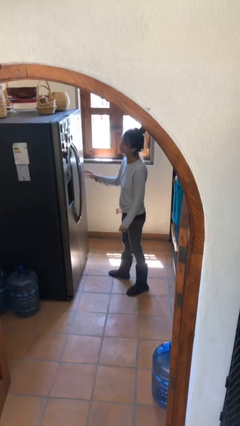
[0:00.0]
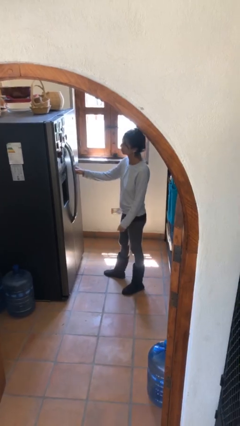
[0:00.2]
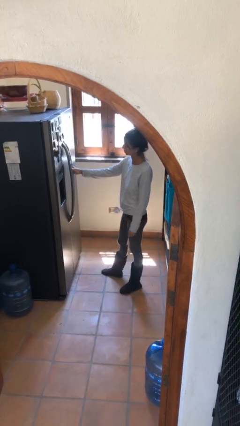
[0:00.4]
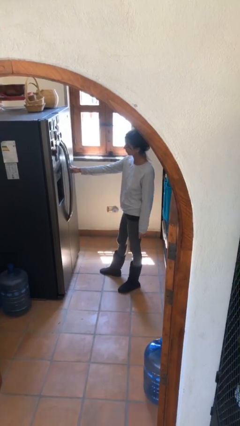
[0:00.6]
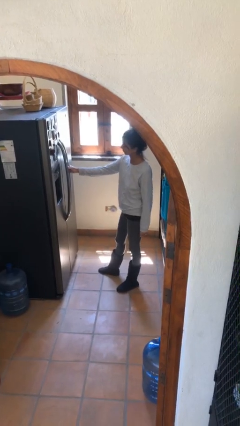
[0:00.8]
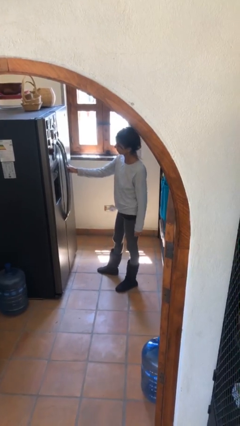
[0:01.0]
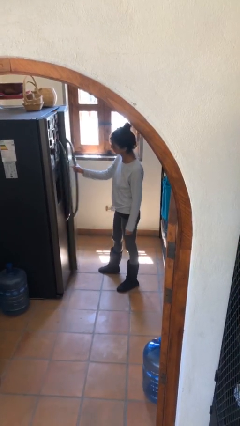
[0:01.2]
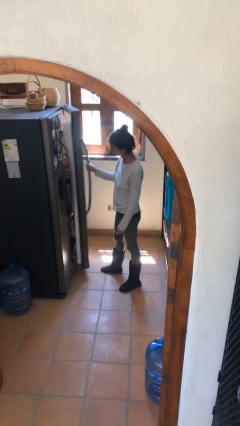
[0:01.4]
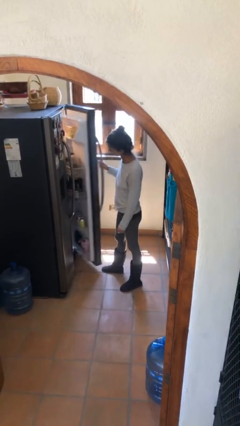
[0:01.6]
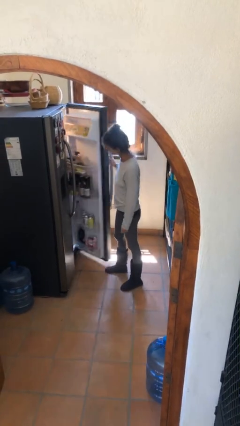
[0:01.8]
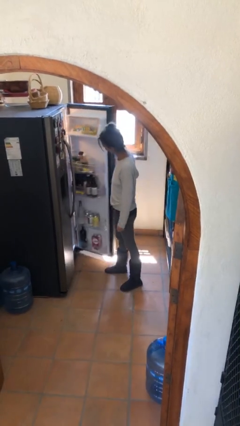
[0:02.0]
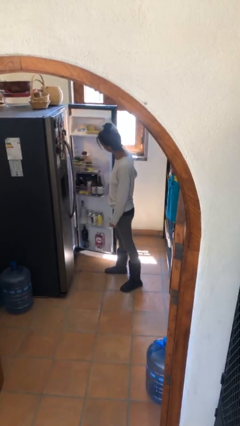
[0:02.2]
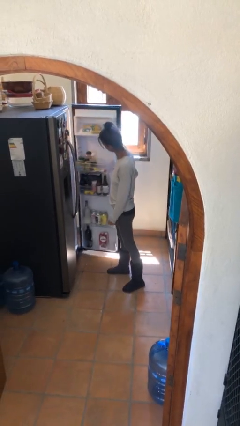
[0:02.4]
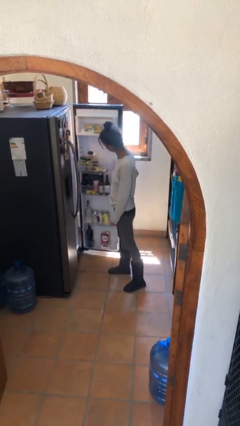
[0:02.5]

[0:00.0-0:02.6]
person opens refrigerator

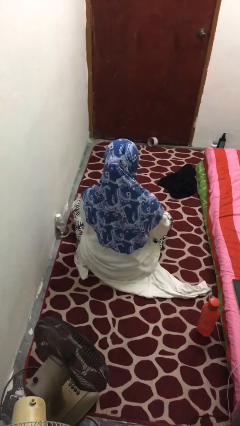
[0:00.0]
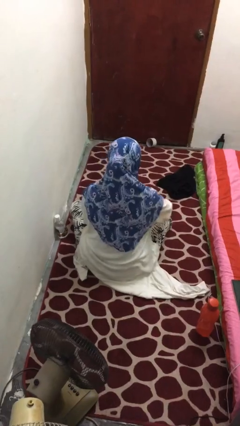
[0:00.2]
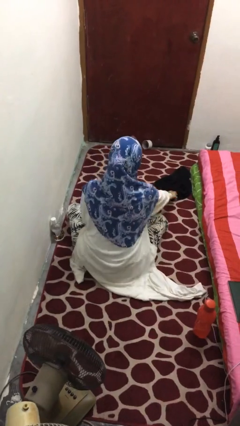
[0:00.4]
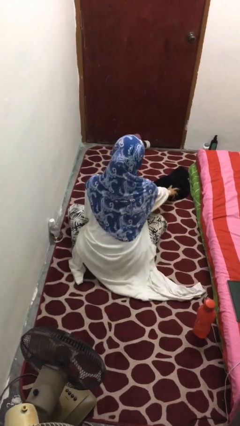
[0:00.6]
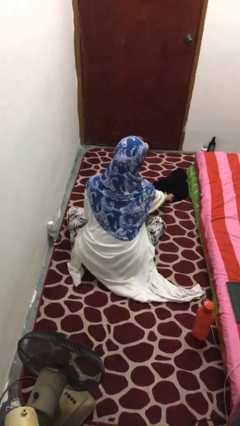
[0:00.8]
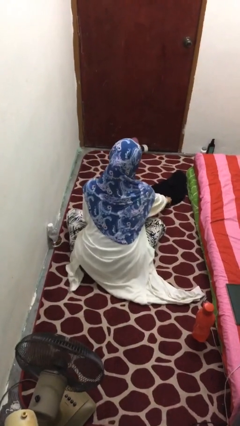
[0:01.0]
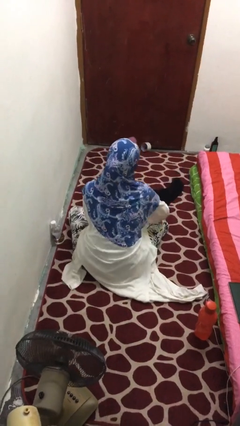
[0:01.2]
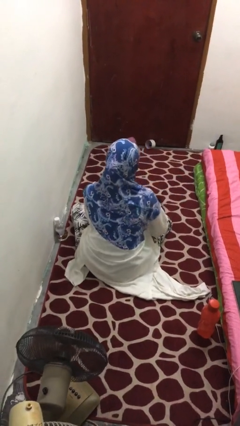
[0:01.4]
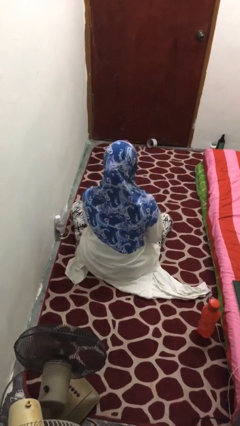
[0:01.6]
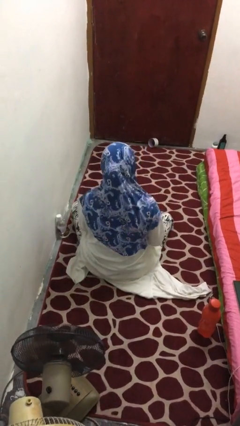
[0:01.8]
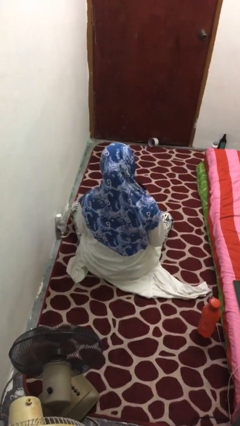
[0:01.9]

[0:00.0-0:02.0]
person picks up object from floor

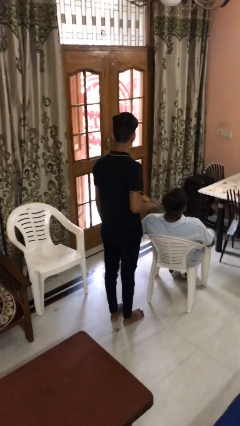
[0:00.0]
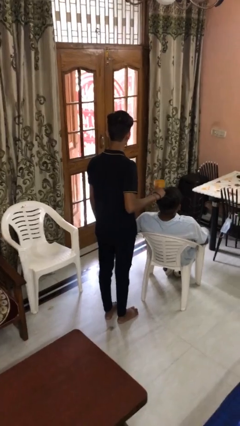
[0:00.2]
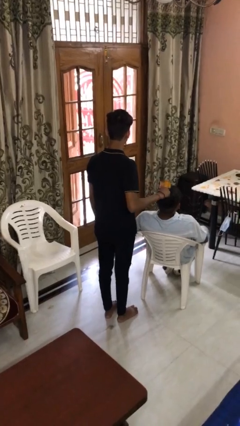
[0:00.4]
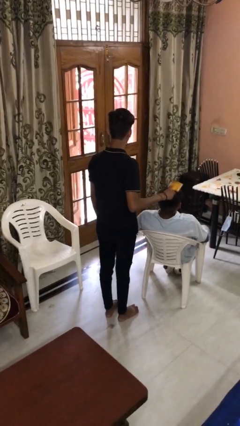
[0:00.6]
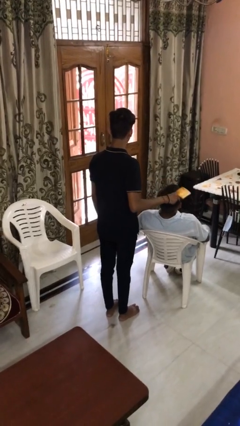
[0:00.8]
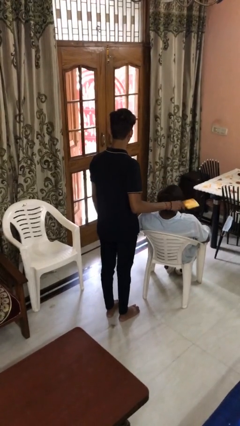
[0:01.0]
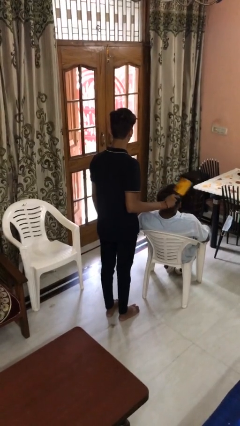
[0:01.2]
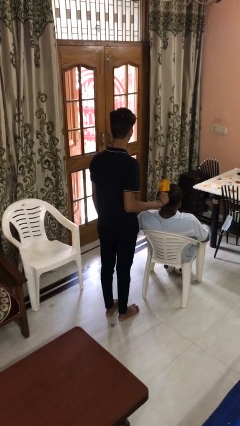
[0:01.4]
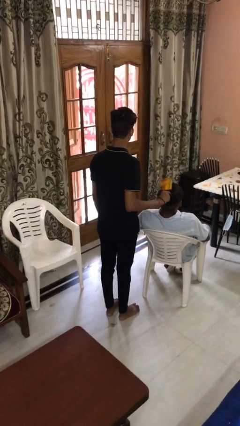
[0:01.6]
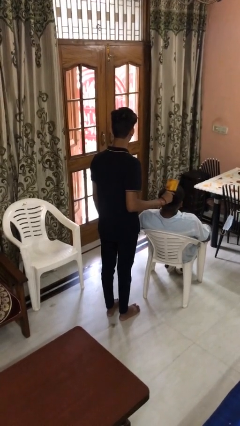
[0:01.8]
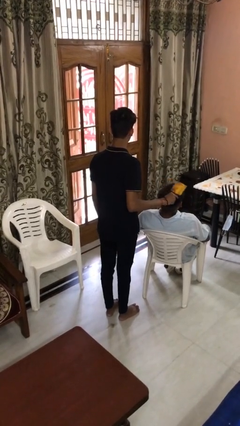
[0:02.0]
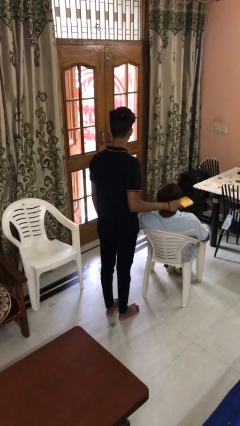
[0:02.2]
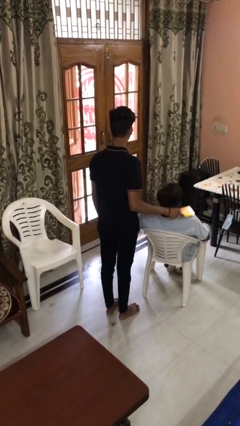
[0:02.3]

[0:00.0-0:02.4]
person brushes hair of person

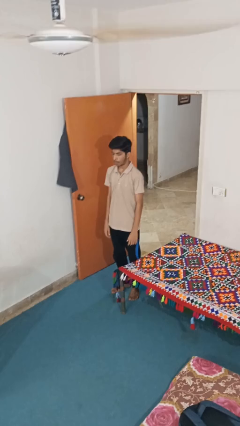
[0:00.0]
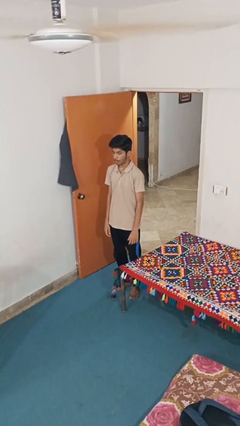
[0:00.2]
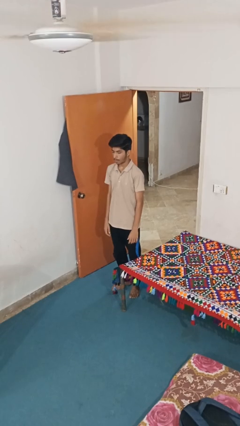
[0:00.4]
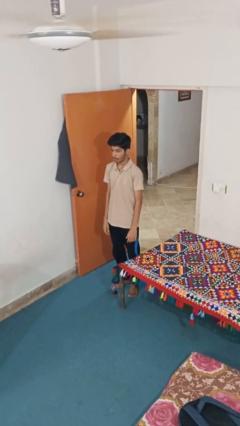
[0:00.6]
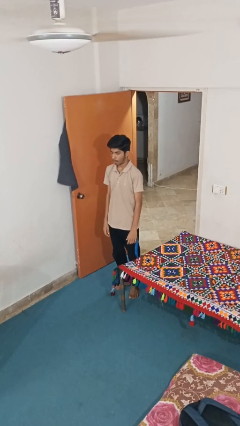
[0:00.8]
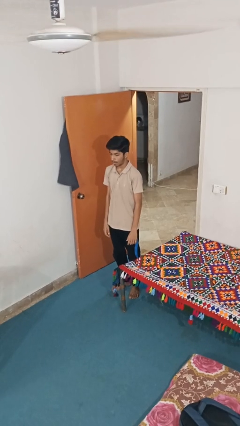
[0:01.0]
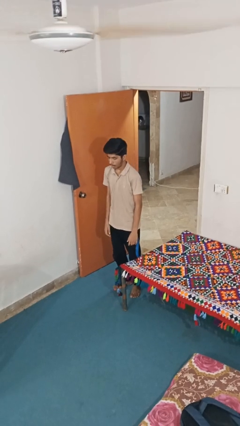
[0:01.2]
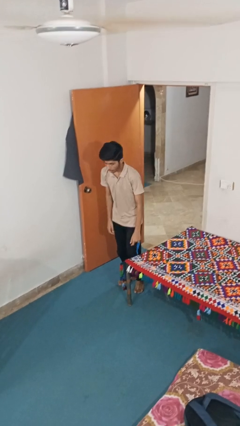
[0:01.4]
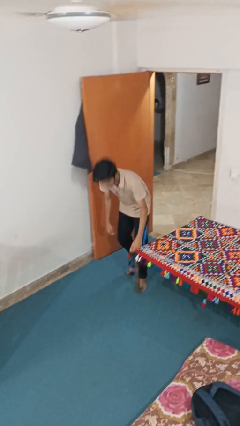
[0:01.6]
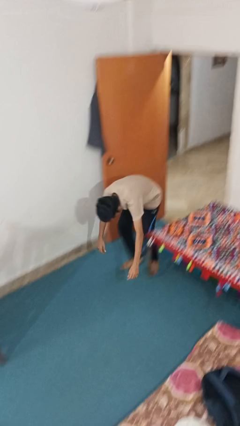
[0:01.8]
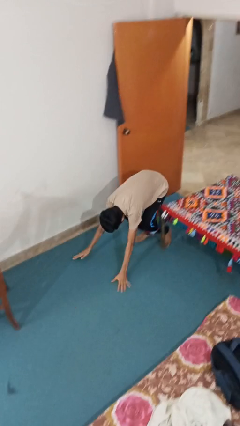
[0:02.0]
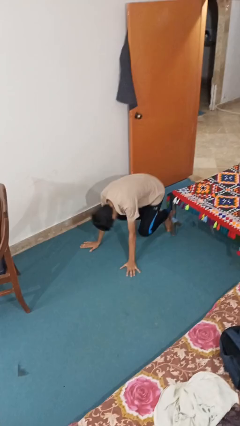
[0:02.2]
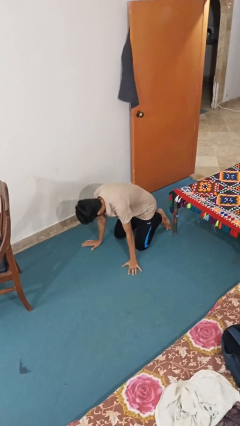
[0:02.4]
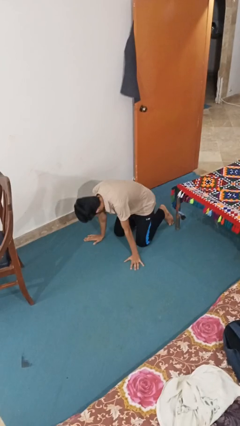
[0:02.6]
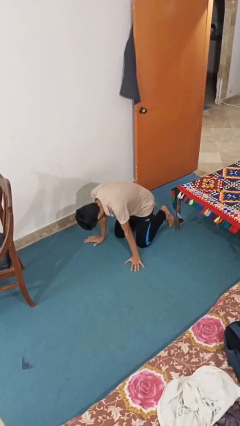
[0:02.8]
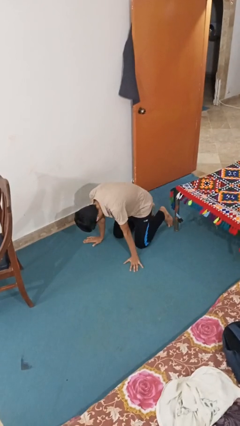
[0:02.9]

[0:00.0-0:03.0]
person trips on object on floor

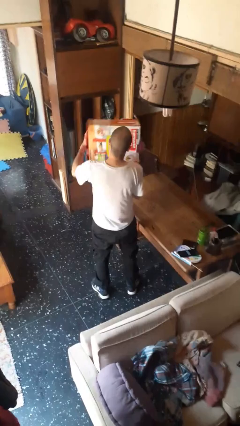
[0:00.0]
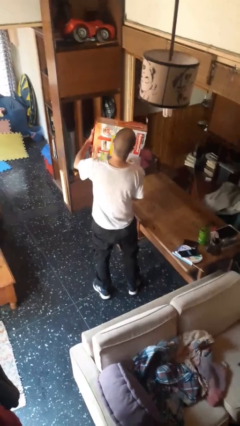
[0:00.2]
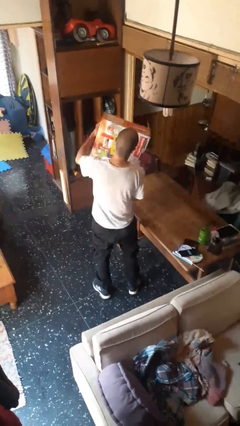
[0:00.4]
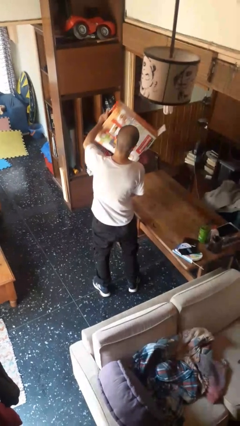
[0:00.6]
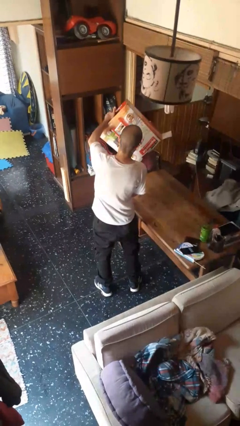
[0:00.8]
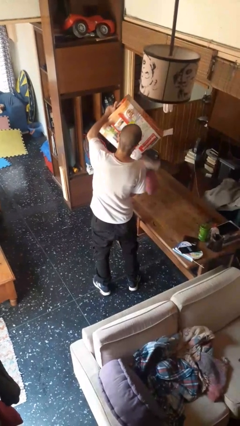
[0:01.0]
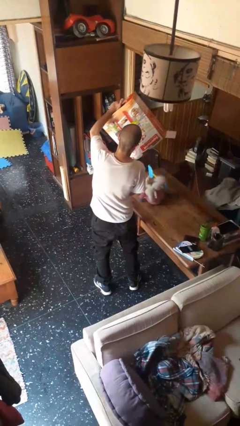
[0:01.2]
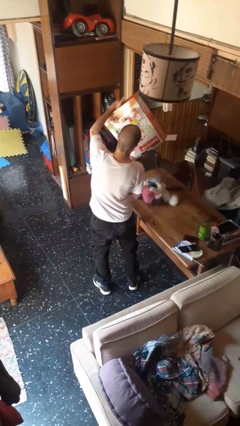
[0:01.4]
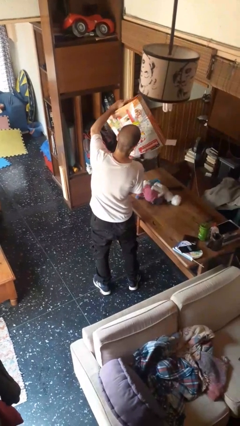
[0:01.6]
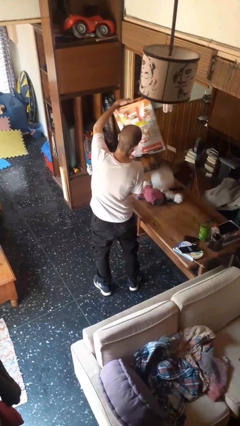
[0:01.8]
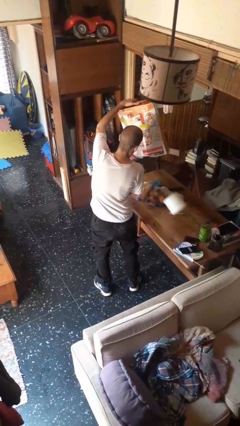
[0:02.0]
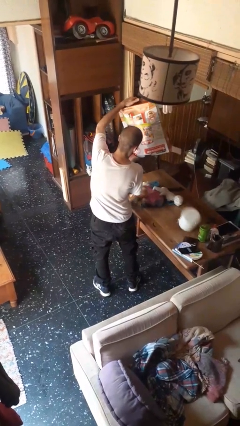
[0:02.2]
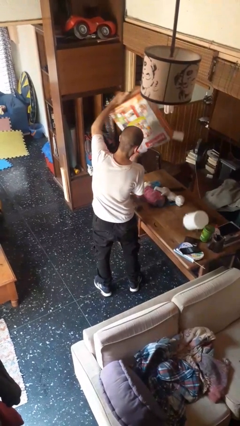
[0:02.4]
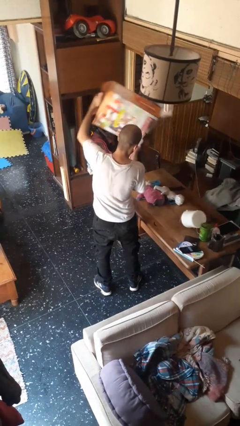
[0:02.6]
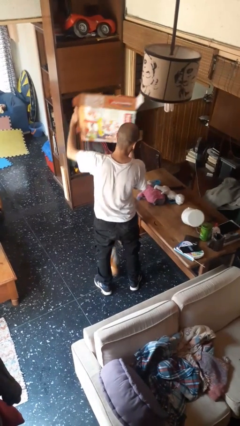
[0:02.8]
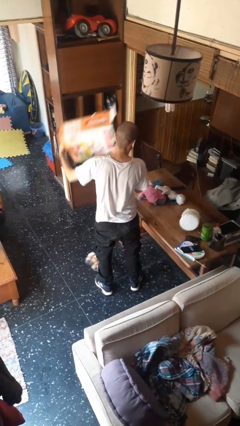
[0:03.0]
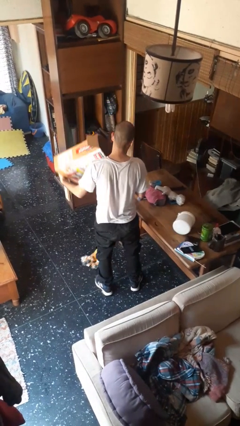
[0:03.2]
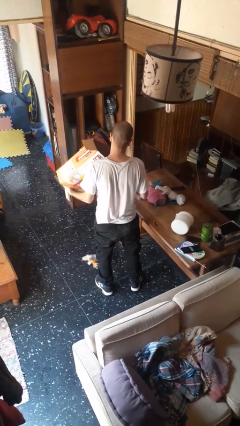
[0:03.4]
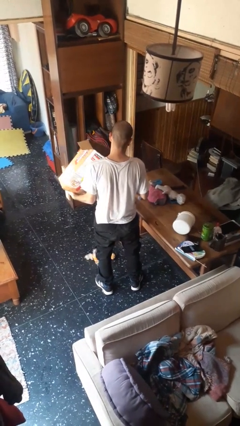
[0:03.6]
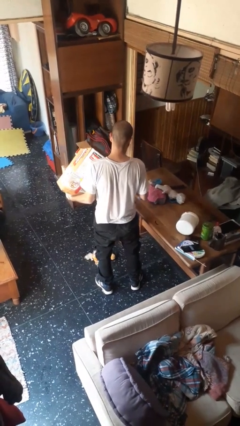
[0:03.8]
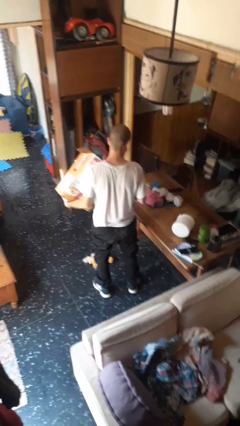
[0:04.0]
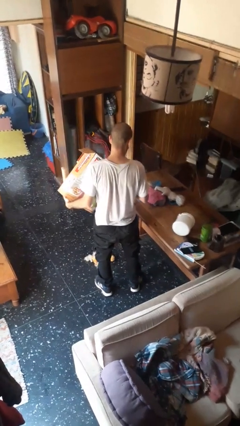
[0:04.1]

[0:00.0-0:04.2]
person unloads box onto table

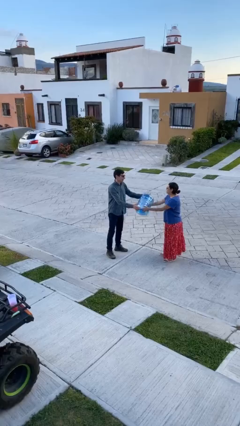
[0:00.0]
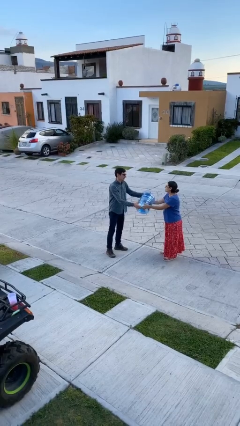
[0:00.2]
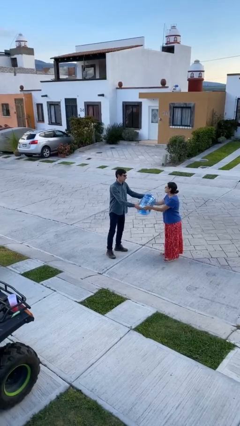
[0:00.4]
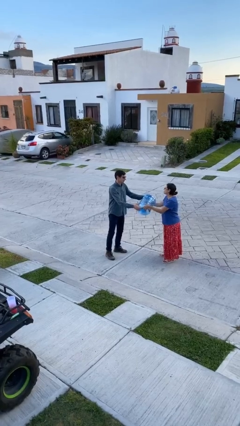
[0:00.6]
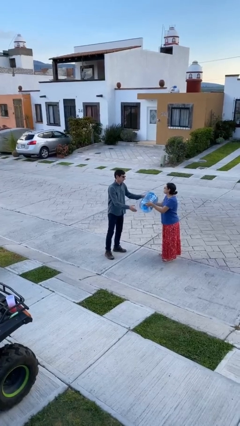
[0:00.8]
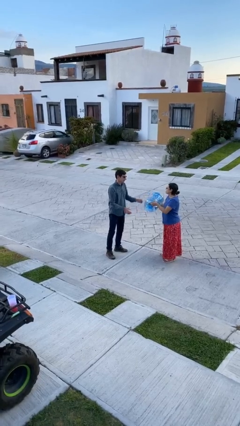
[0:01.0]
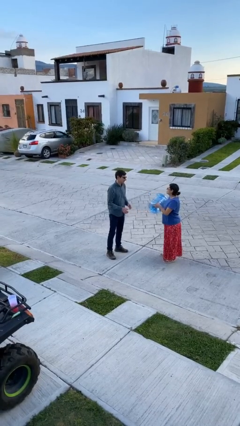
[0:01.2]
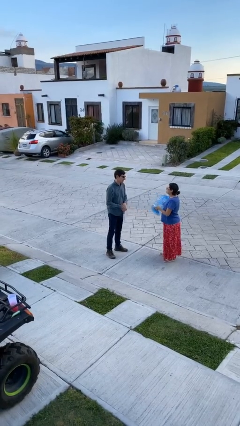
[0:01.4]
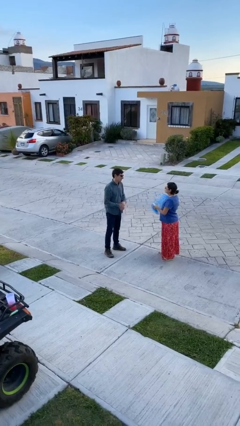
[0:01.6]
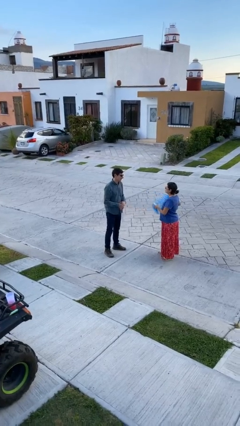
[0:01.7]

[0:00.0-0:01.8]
person transfers object to person

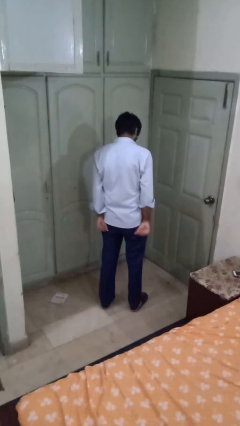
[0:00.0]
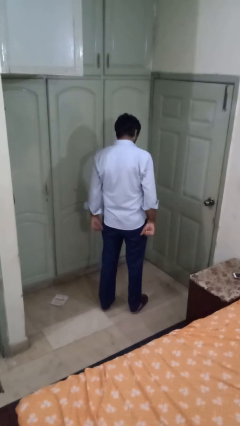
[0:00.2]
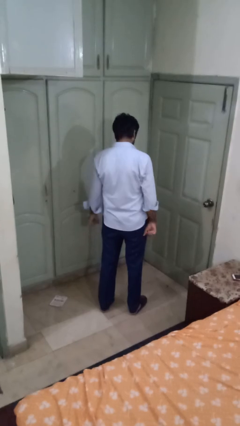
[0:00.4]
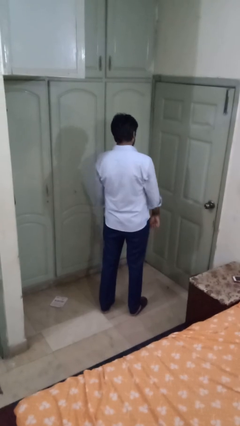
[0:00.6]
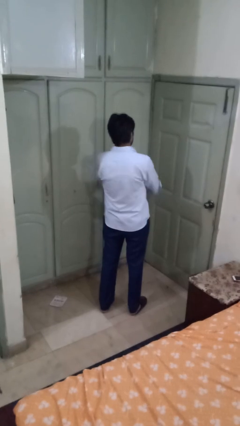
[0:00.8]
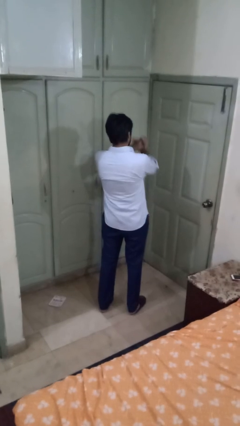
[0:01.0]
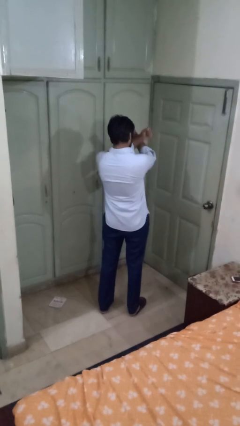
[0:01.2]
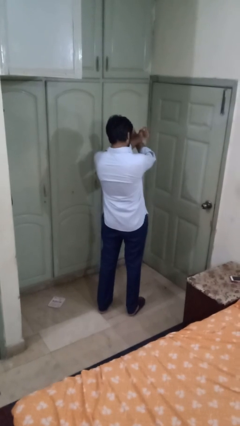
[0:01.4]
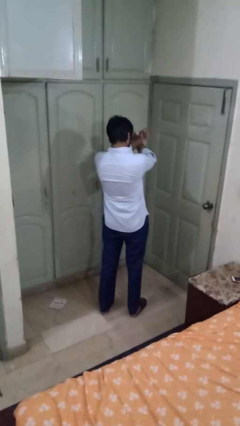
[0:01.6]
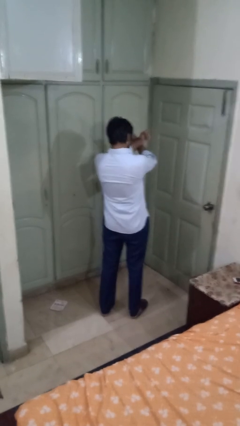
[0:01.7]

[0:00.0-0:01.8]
person gestures arms x
